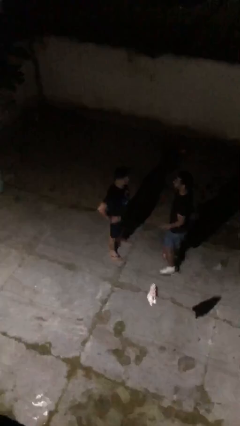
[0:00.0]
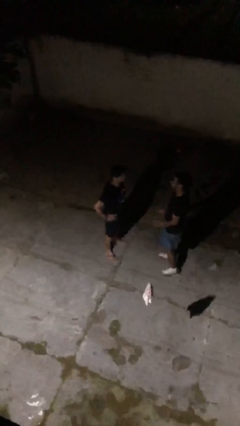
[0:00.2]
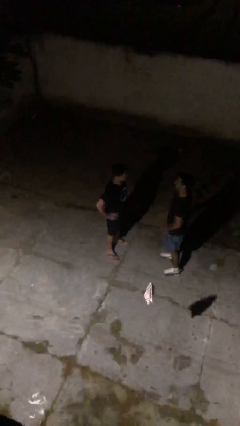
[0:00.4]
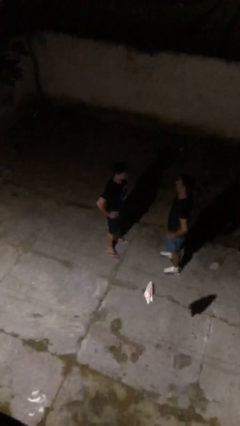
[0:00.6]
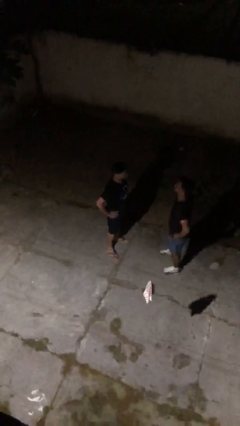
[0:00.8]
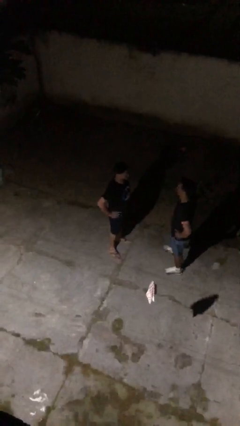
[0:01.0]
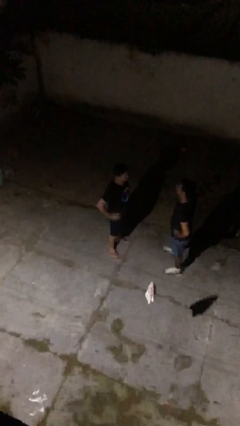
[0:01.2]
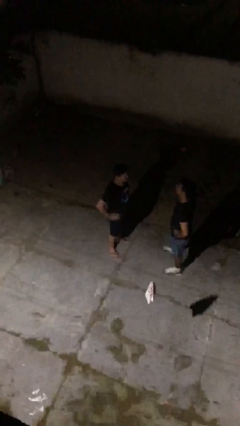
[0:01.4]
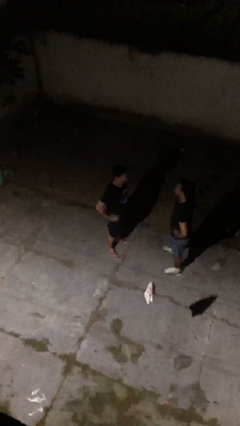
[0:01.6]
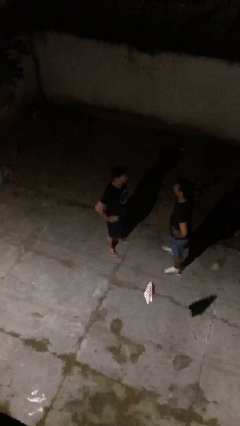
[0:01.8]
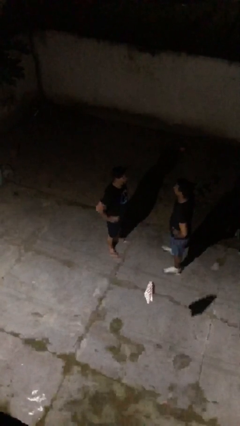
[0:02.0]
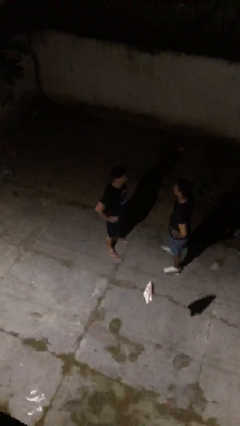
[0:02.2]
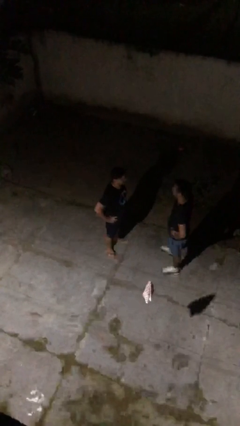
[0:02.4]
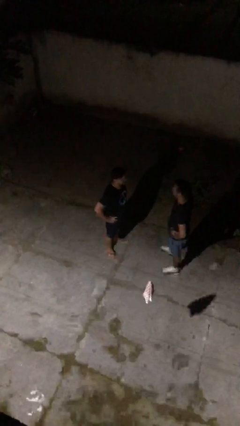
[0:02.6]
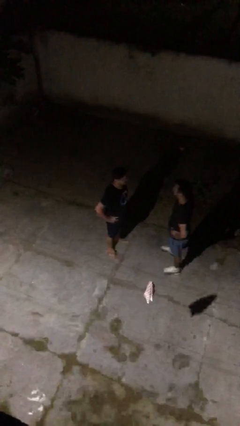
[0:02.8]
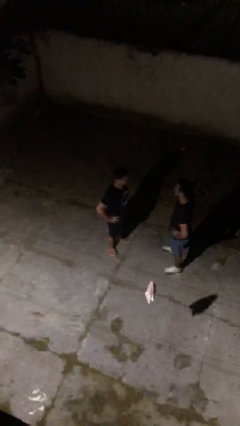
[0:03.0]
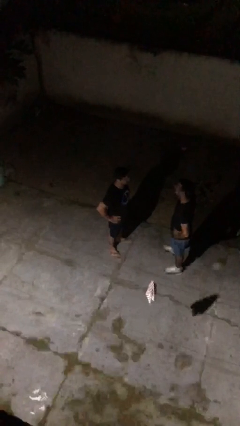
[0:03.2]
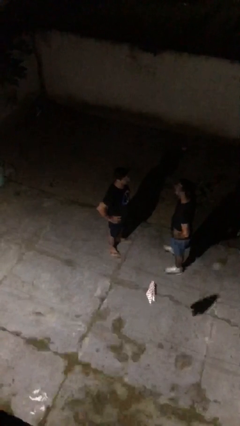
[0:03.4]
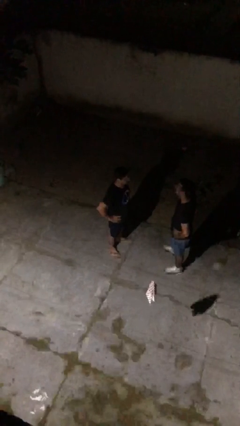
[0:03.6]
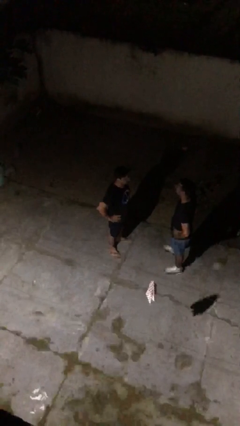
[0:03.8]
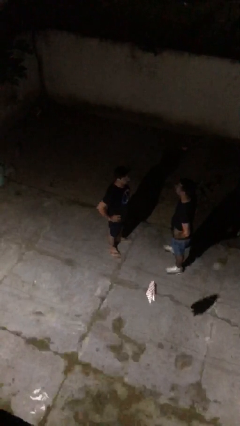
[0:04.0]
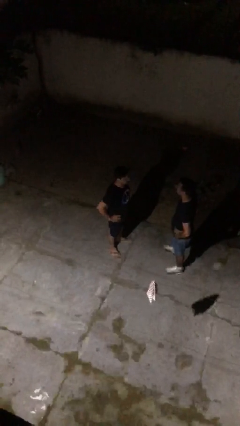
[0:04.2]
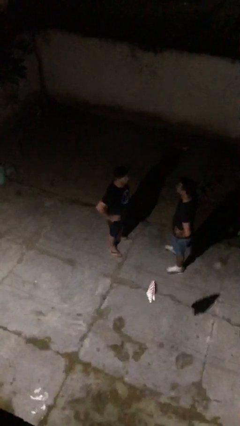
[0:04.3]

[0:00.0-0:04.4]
person talks to person

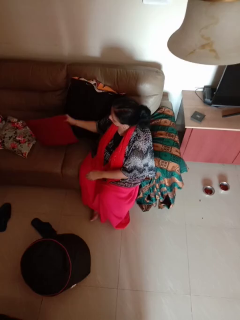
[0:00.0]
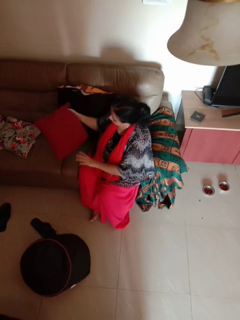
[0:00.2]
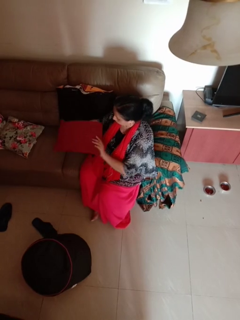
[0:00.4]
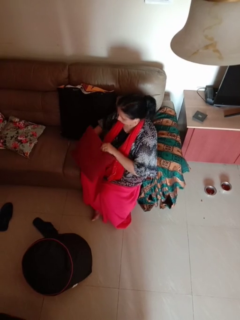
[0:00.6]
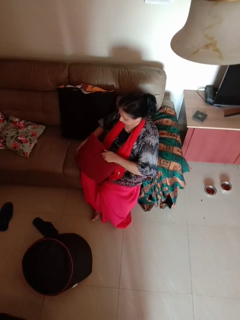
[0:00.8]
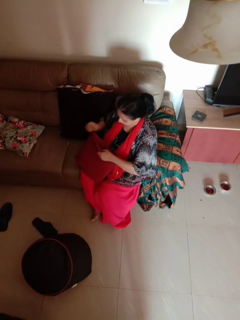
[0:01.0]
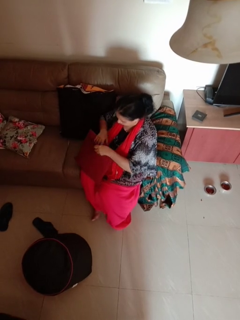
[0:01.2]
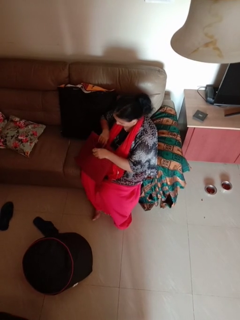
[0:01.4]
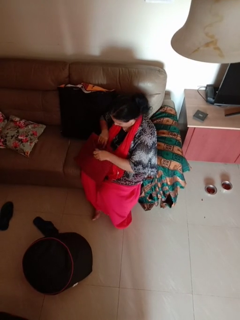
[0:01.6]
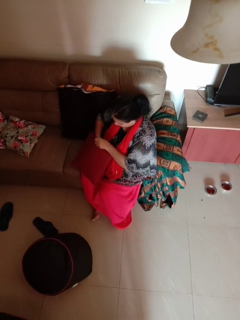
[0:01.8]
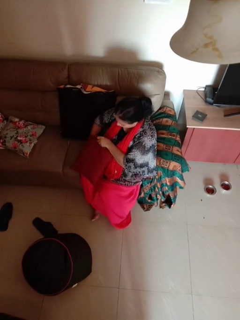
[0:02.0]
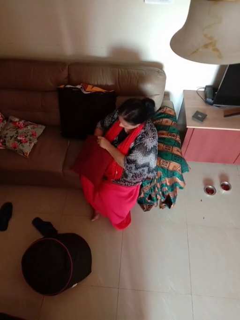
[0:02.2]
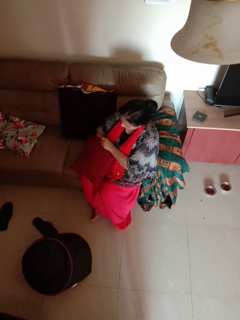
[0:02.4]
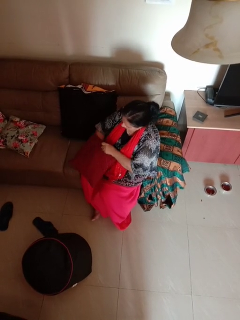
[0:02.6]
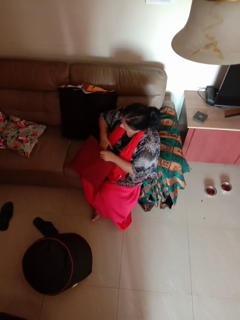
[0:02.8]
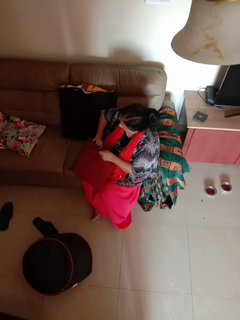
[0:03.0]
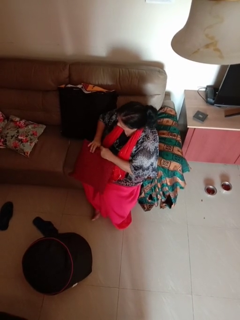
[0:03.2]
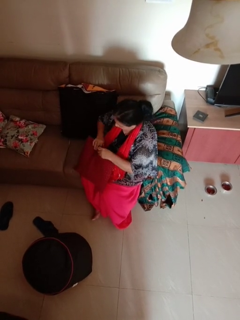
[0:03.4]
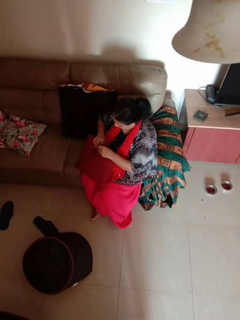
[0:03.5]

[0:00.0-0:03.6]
person searches in couch

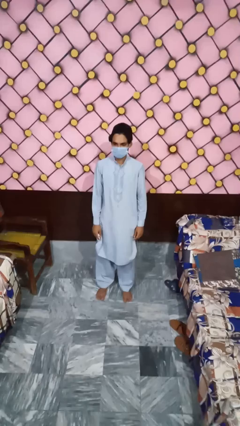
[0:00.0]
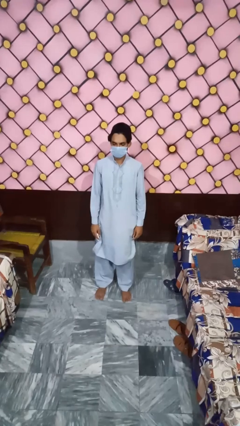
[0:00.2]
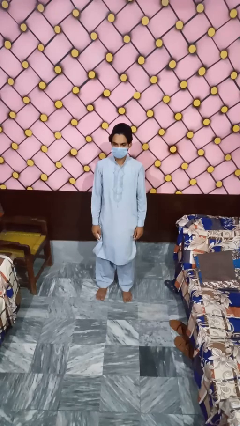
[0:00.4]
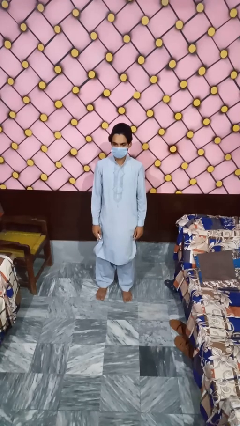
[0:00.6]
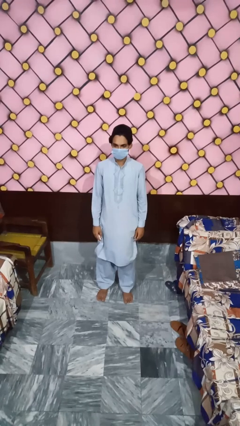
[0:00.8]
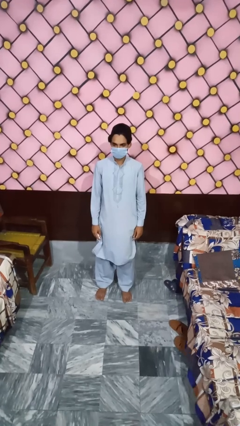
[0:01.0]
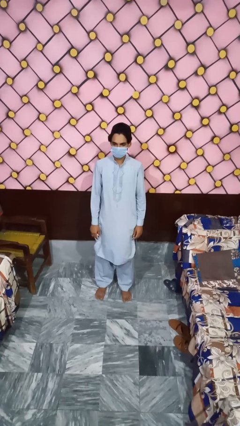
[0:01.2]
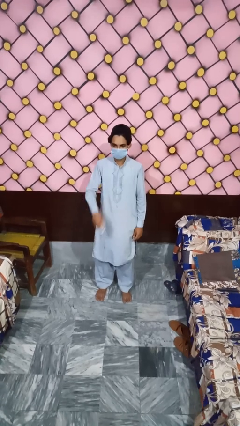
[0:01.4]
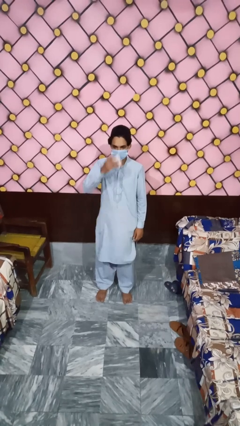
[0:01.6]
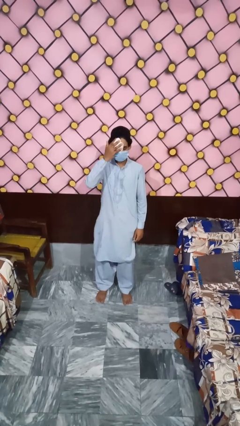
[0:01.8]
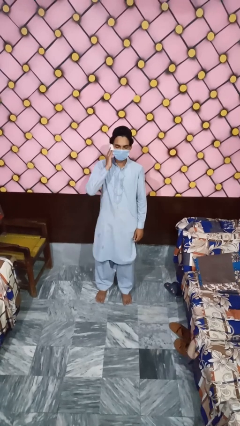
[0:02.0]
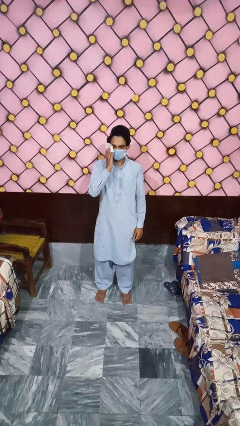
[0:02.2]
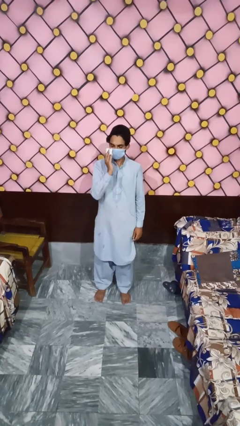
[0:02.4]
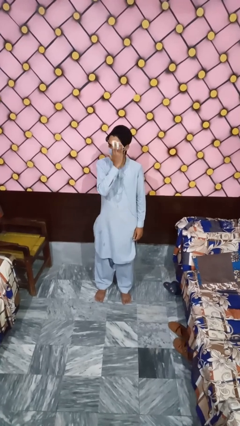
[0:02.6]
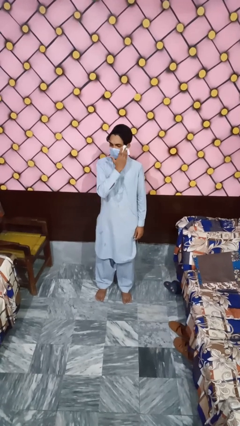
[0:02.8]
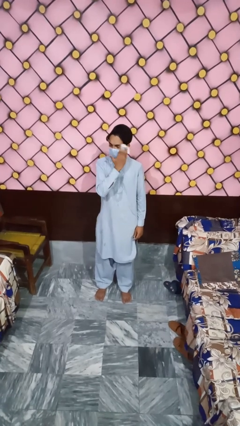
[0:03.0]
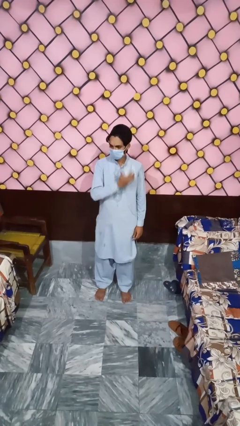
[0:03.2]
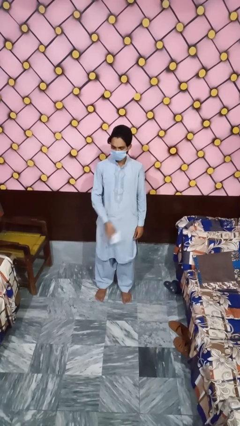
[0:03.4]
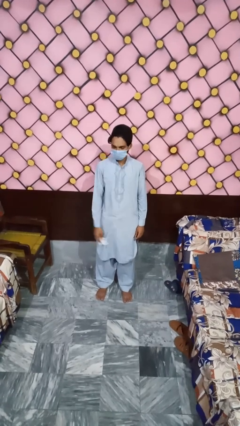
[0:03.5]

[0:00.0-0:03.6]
person wipes mouth with napkin

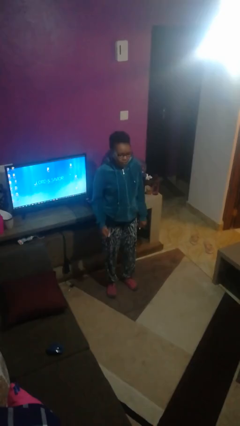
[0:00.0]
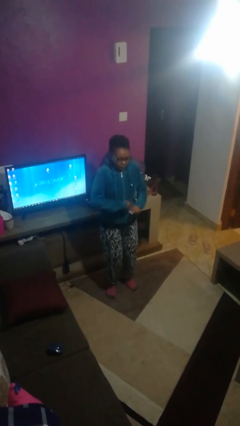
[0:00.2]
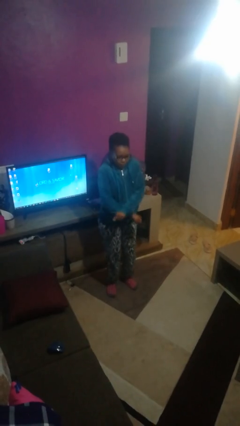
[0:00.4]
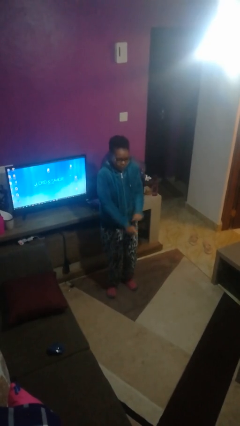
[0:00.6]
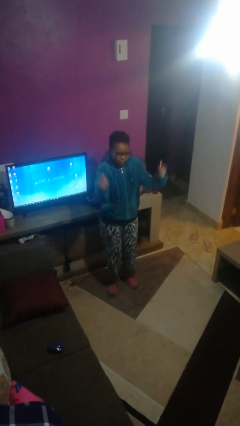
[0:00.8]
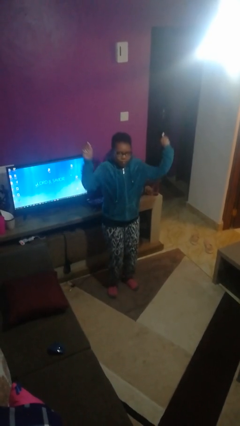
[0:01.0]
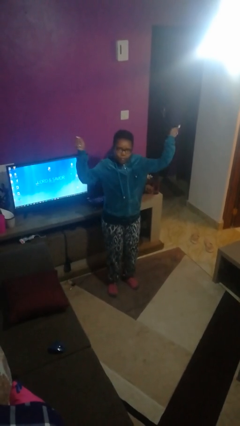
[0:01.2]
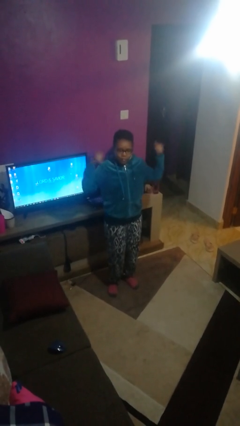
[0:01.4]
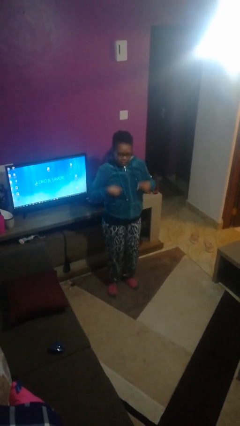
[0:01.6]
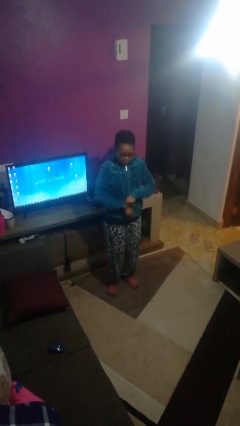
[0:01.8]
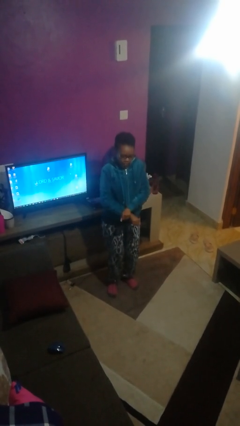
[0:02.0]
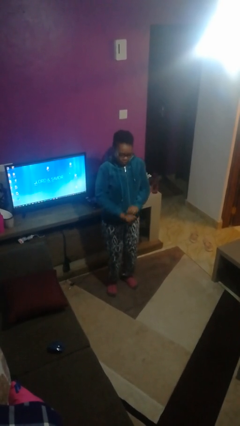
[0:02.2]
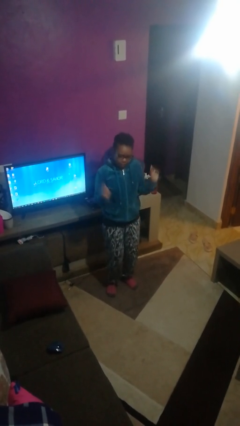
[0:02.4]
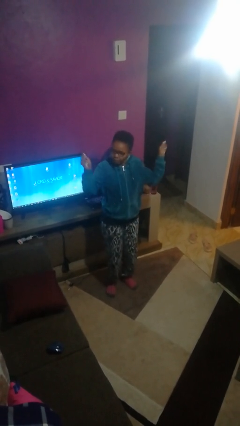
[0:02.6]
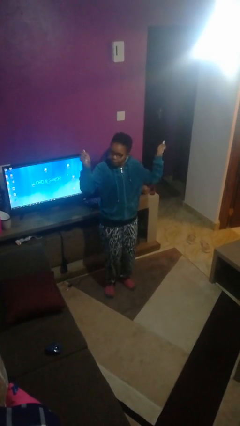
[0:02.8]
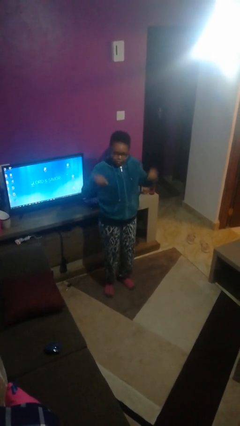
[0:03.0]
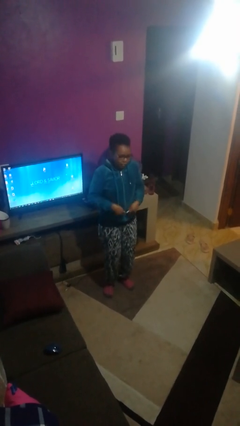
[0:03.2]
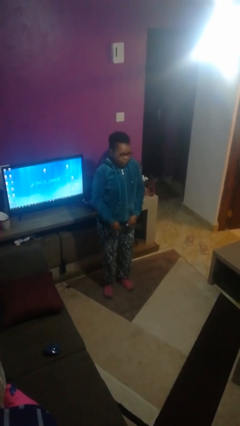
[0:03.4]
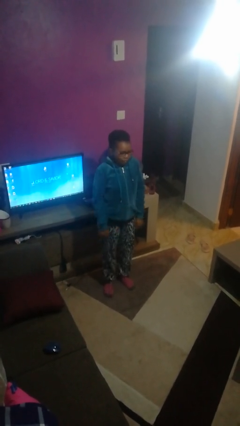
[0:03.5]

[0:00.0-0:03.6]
person dances in place

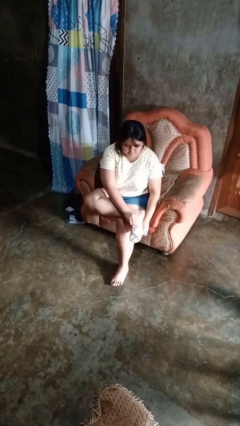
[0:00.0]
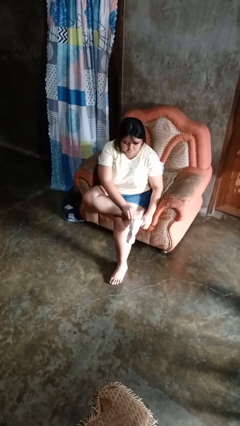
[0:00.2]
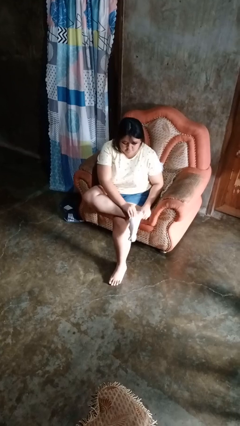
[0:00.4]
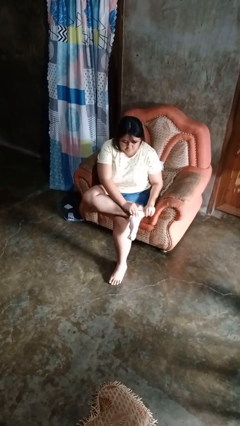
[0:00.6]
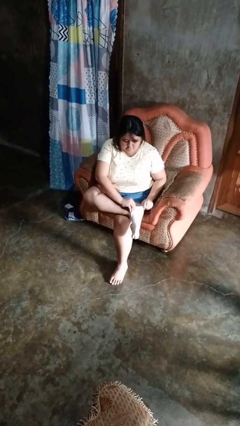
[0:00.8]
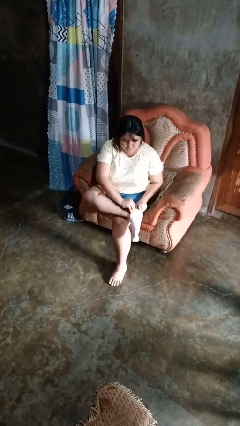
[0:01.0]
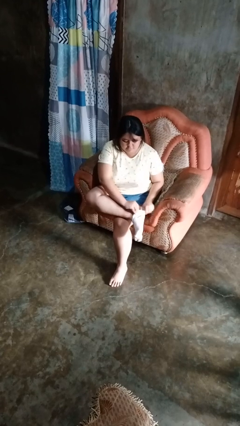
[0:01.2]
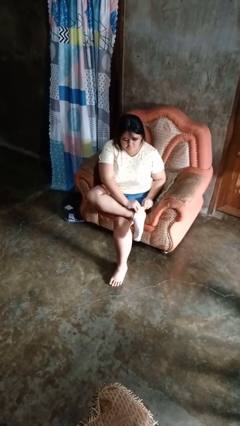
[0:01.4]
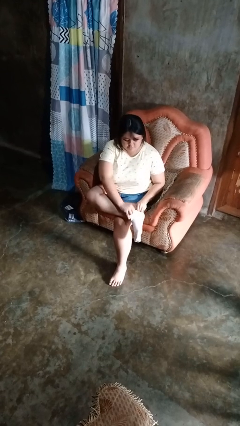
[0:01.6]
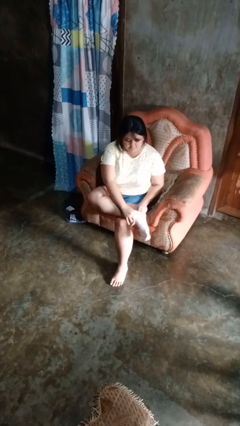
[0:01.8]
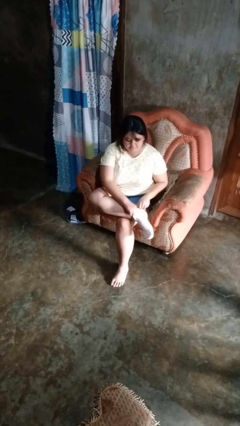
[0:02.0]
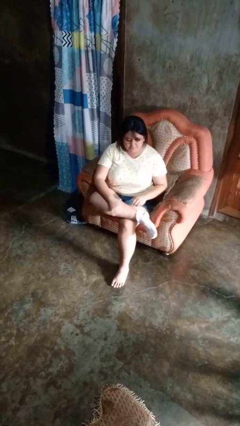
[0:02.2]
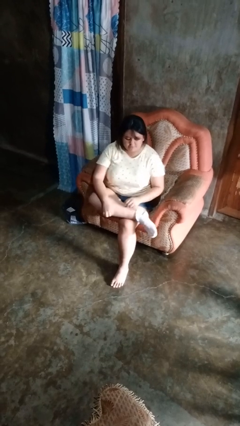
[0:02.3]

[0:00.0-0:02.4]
person puts on socks

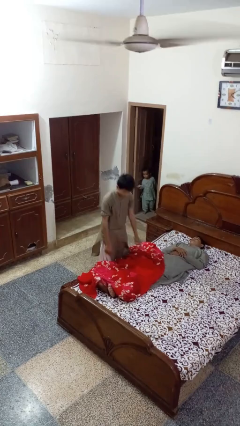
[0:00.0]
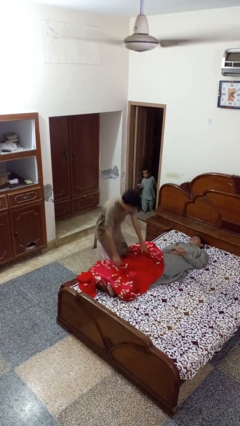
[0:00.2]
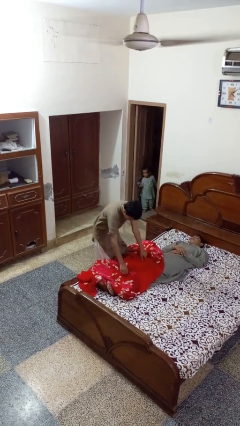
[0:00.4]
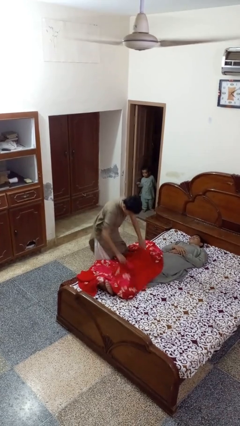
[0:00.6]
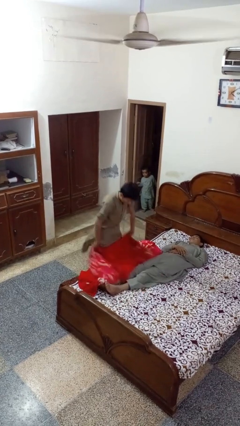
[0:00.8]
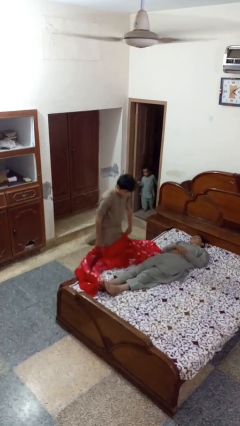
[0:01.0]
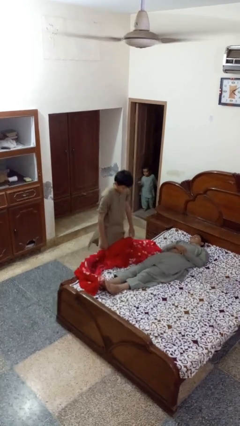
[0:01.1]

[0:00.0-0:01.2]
person uncovers friend with blanket
